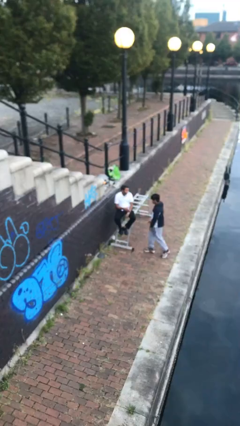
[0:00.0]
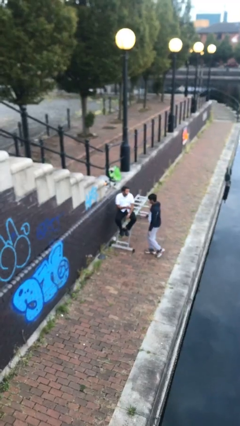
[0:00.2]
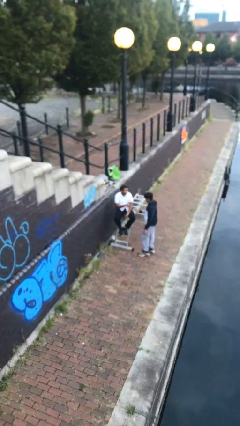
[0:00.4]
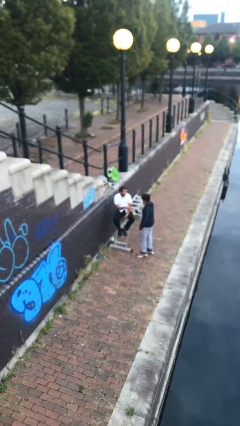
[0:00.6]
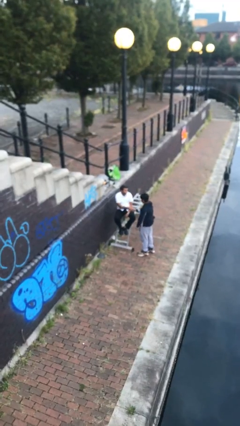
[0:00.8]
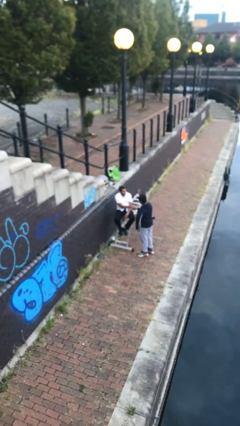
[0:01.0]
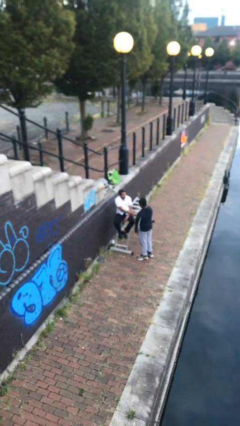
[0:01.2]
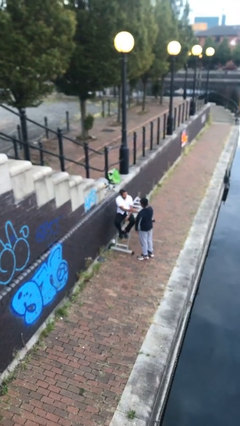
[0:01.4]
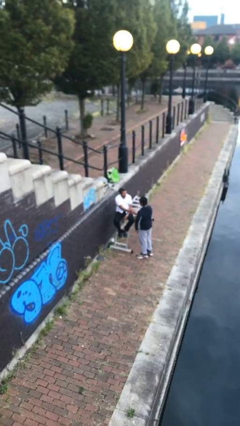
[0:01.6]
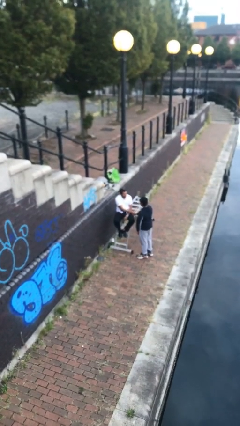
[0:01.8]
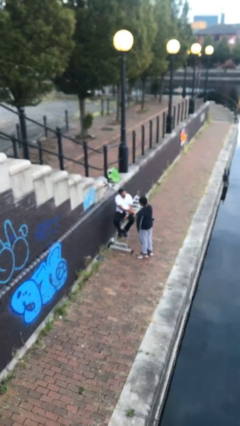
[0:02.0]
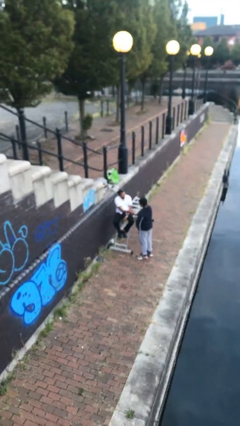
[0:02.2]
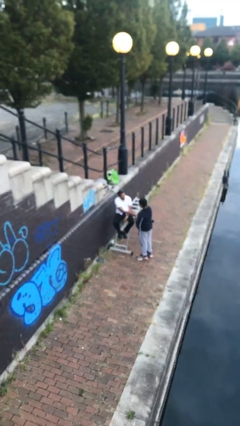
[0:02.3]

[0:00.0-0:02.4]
person shakes hand

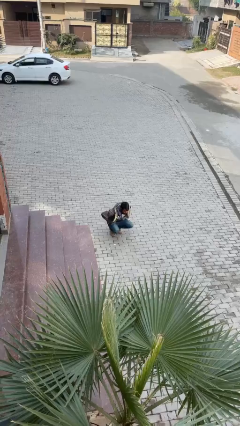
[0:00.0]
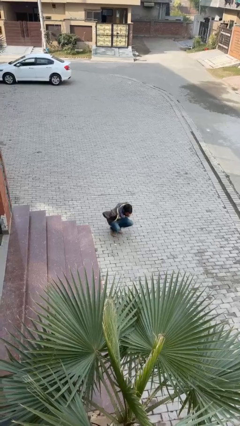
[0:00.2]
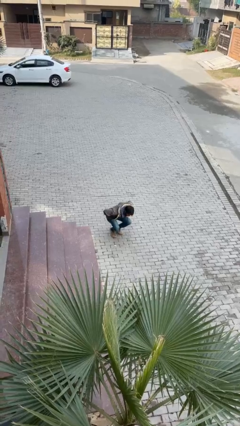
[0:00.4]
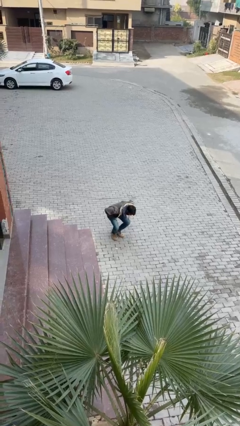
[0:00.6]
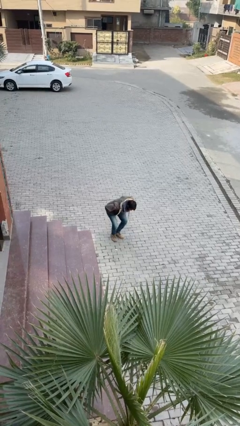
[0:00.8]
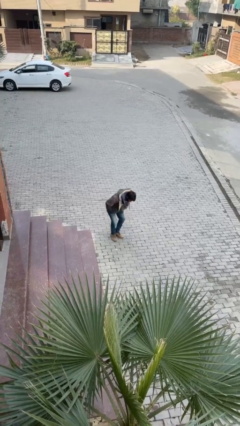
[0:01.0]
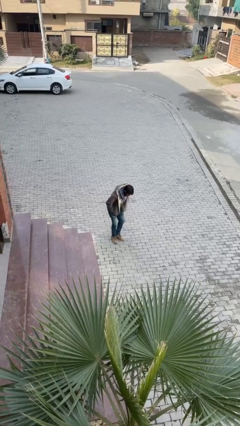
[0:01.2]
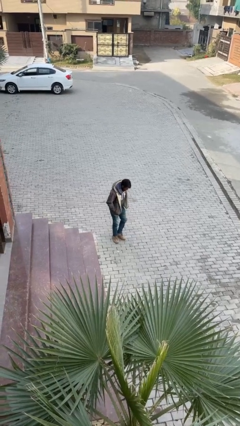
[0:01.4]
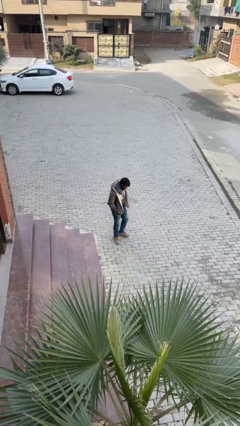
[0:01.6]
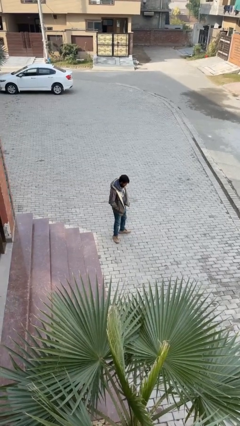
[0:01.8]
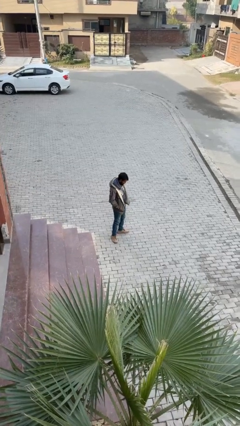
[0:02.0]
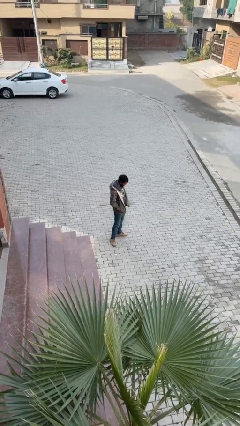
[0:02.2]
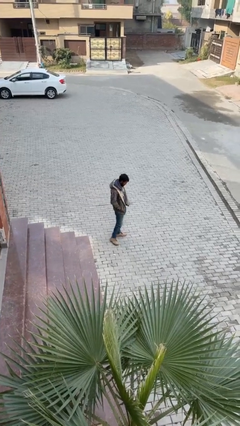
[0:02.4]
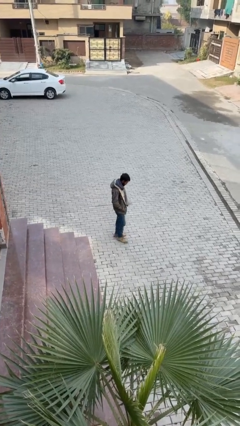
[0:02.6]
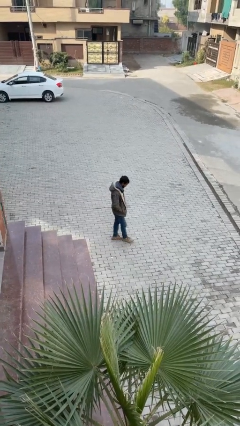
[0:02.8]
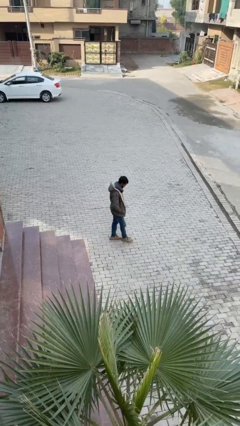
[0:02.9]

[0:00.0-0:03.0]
person stands up

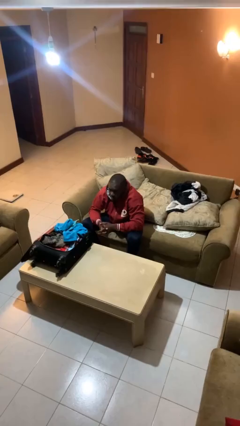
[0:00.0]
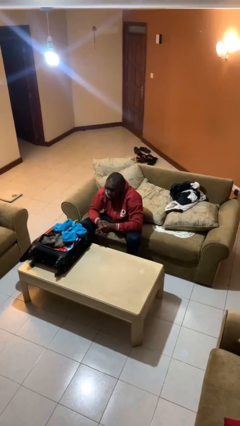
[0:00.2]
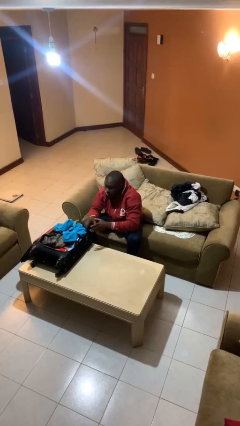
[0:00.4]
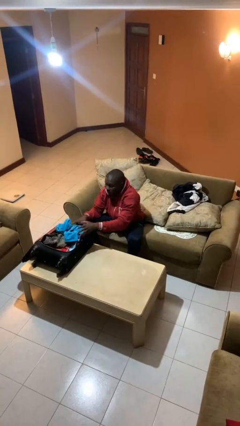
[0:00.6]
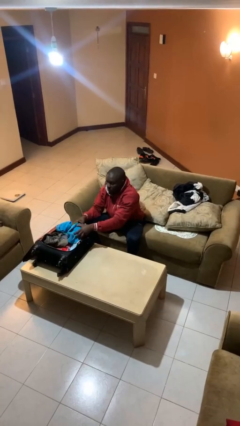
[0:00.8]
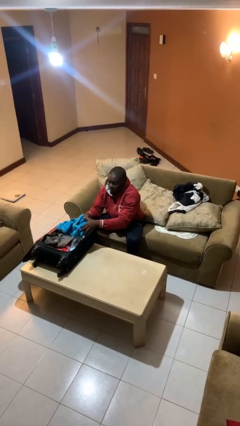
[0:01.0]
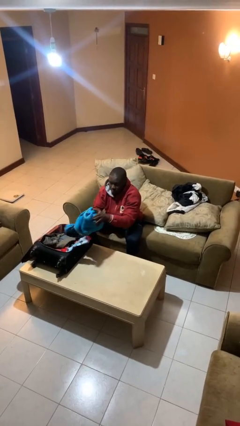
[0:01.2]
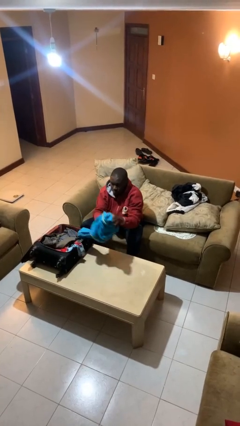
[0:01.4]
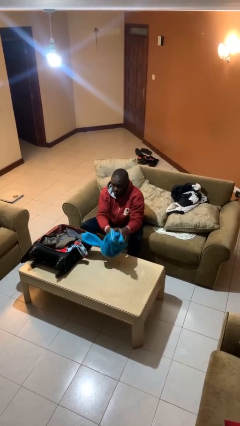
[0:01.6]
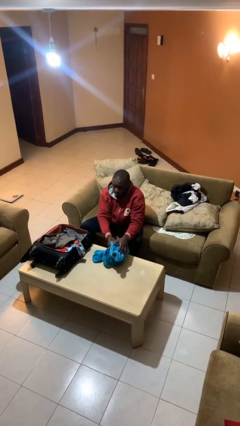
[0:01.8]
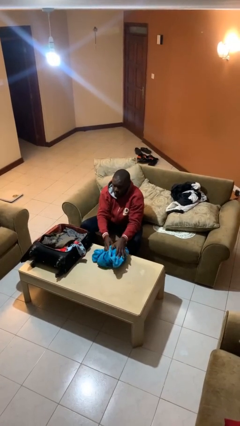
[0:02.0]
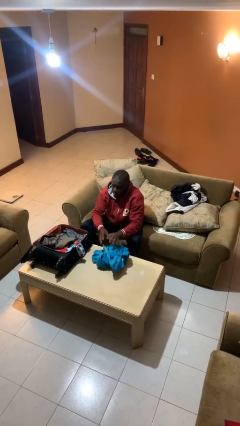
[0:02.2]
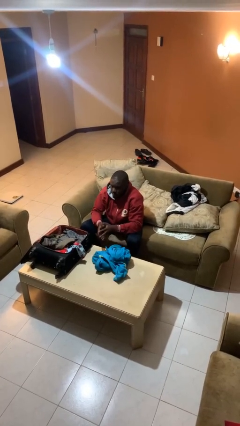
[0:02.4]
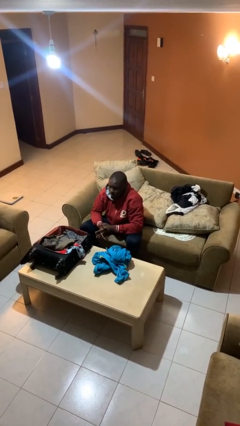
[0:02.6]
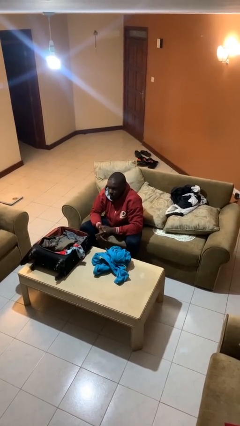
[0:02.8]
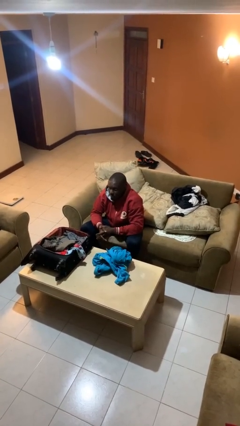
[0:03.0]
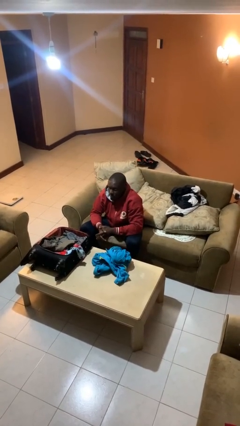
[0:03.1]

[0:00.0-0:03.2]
person unloads clothes from suitcase

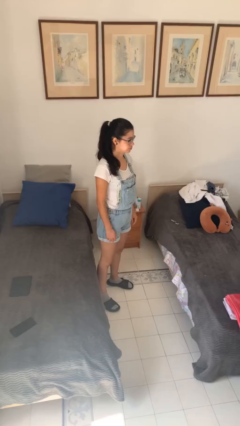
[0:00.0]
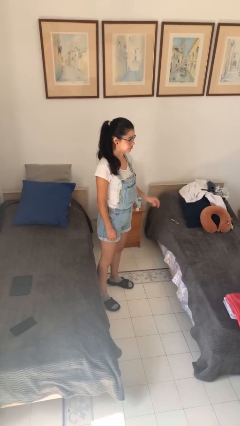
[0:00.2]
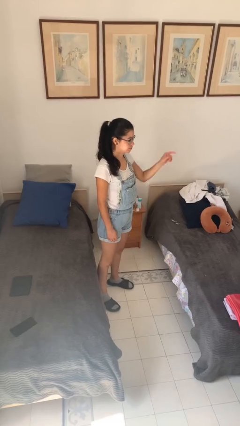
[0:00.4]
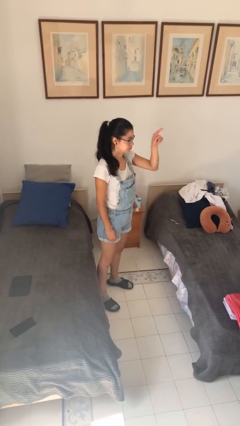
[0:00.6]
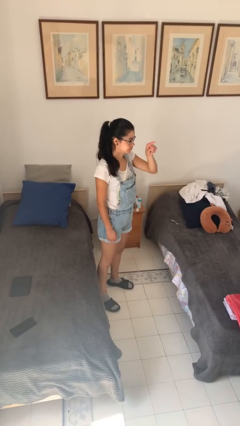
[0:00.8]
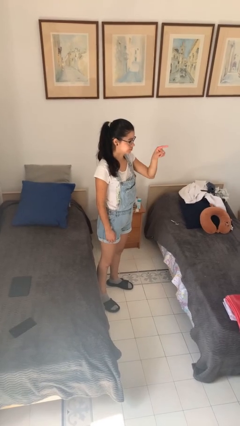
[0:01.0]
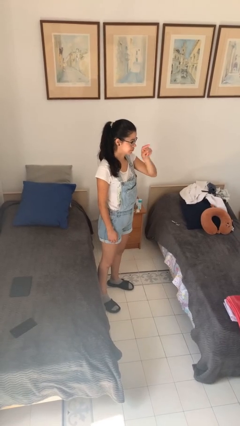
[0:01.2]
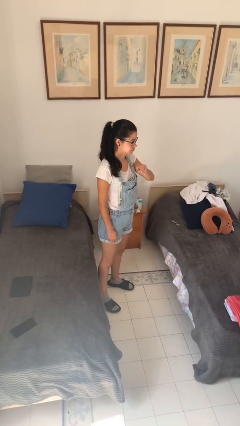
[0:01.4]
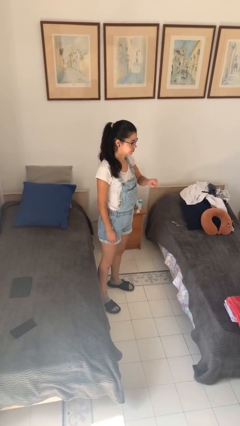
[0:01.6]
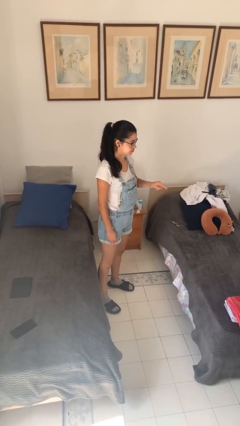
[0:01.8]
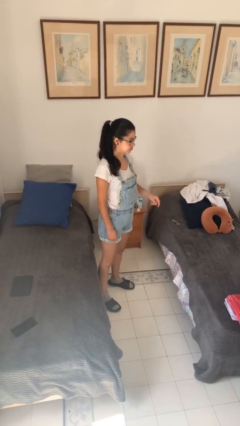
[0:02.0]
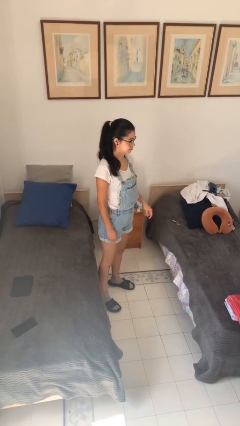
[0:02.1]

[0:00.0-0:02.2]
person gestures number three

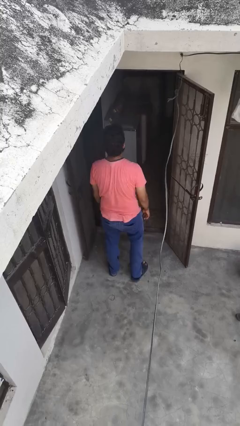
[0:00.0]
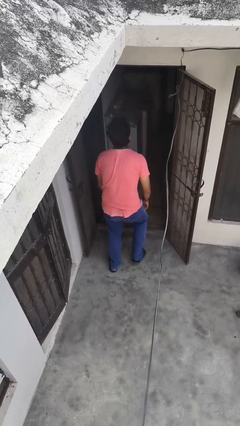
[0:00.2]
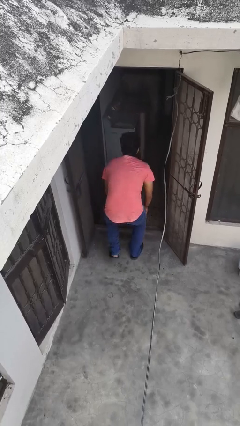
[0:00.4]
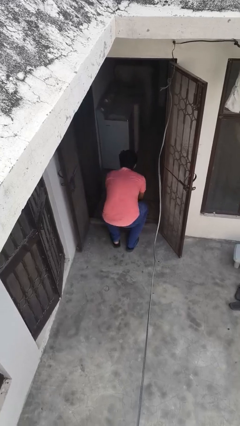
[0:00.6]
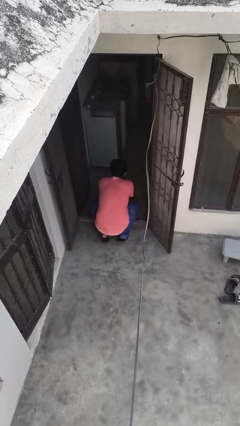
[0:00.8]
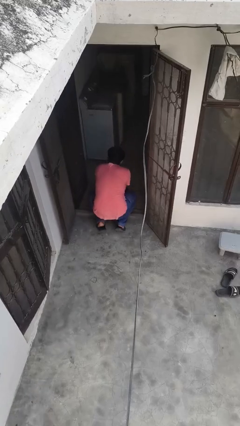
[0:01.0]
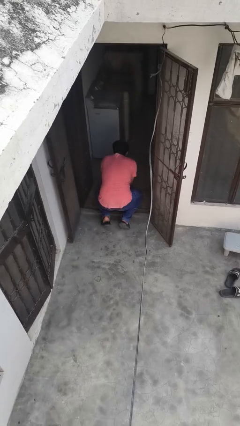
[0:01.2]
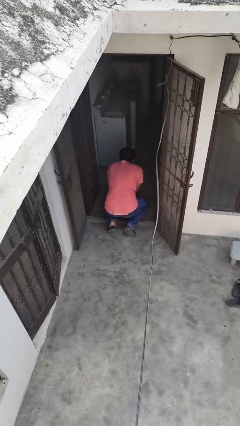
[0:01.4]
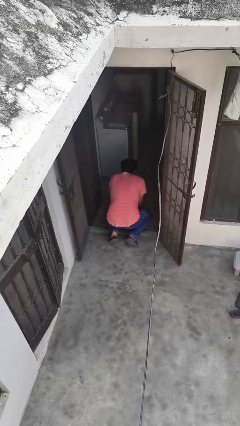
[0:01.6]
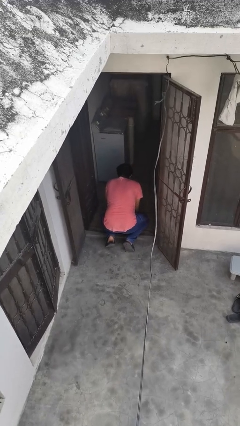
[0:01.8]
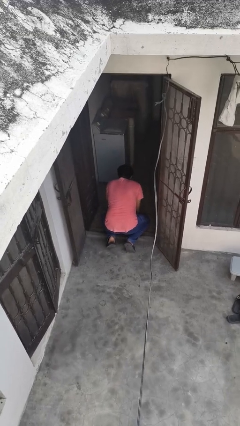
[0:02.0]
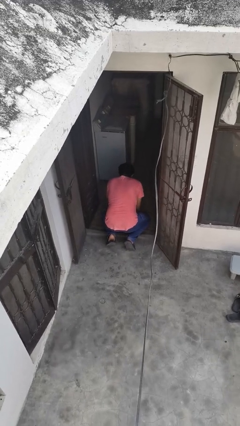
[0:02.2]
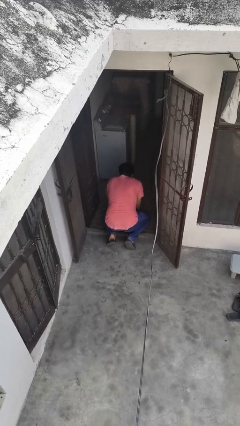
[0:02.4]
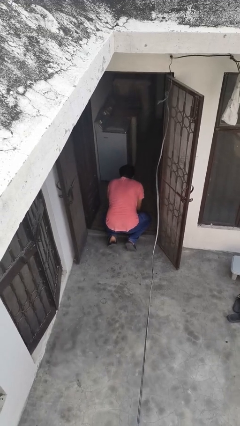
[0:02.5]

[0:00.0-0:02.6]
person trips on object on floor

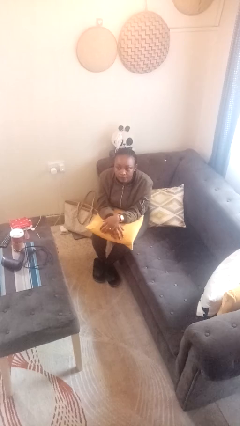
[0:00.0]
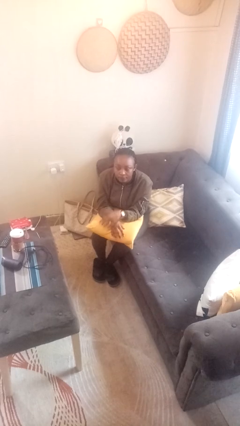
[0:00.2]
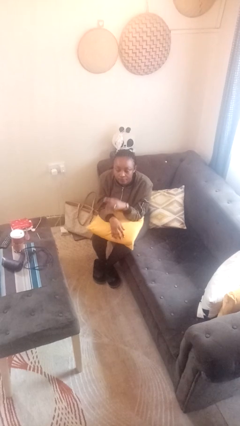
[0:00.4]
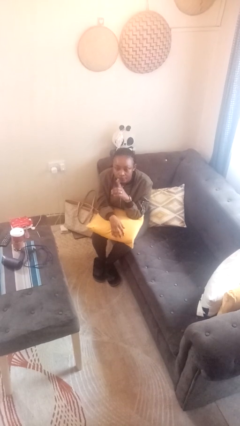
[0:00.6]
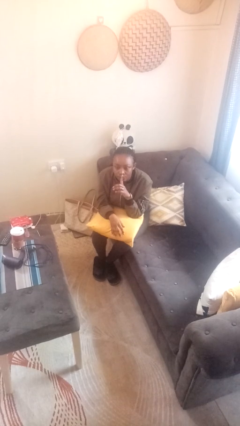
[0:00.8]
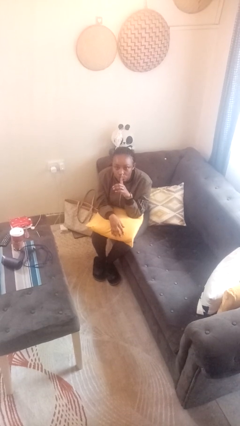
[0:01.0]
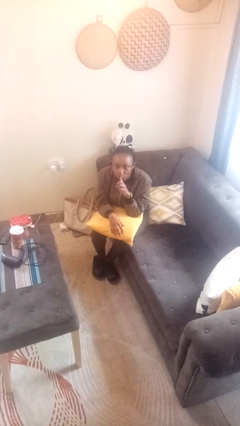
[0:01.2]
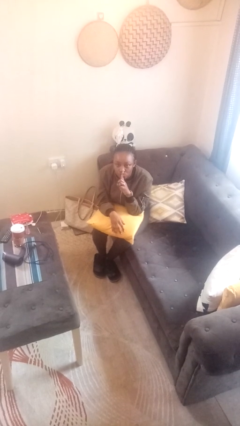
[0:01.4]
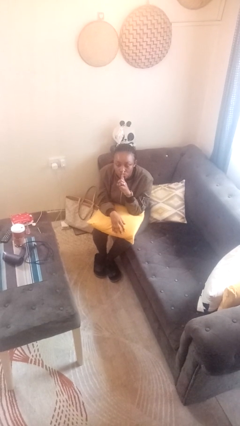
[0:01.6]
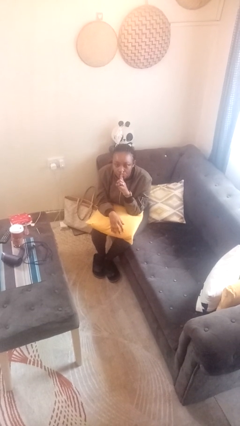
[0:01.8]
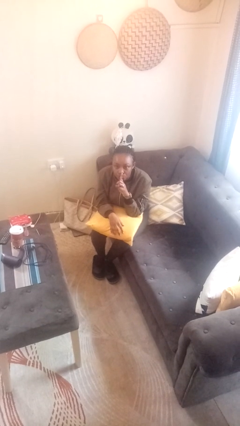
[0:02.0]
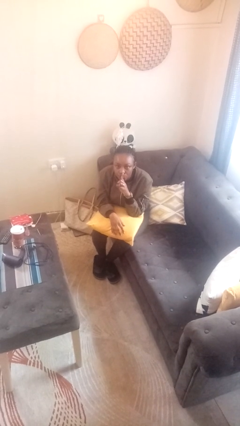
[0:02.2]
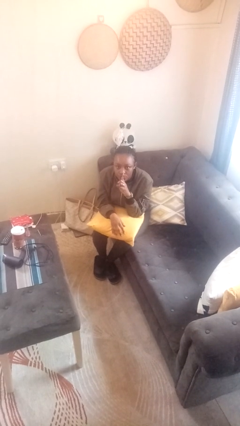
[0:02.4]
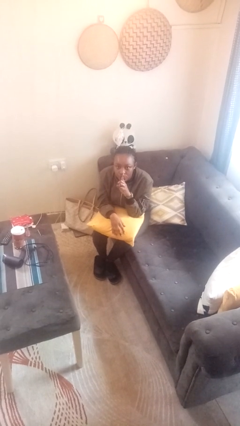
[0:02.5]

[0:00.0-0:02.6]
person gestures be quiet

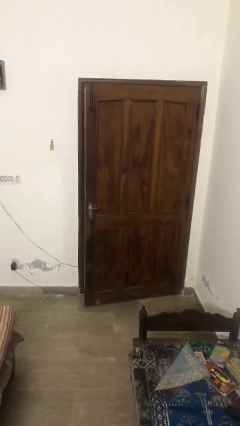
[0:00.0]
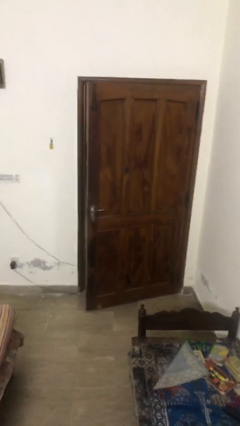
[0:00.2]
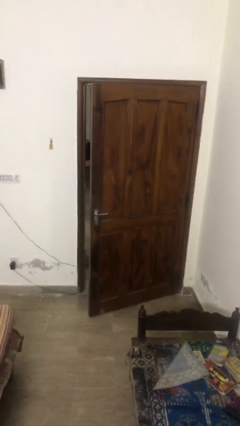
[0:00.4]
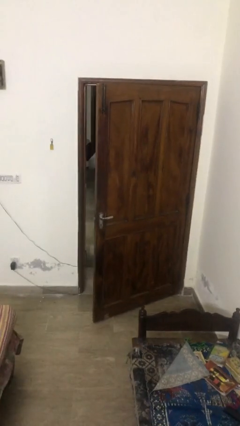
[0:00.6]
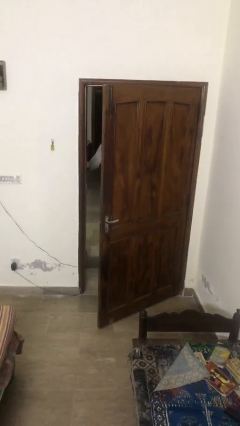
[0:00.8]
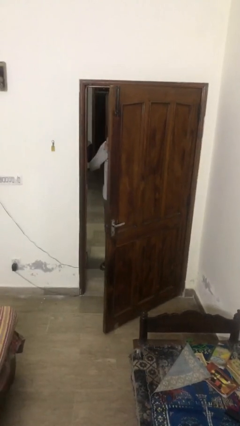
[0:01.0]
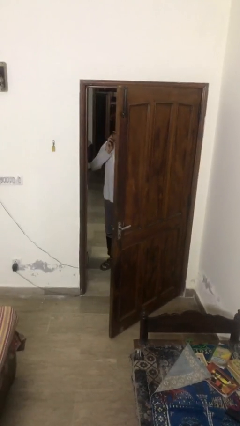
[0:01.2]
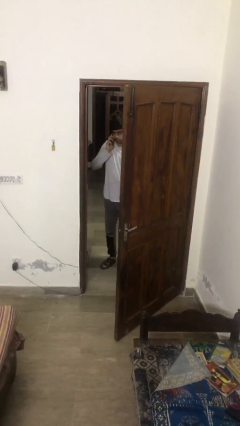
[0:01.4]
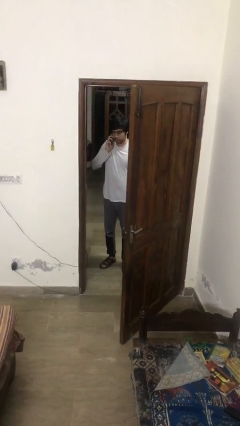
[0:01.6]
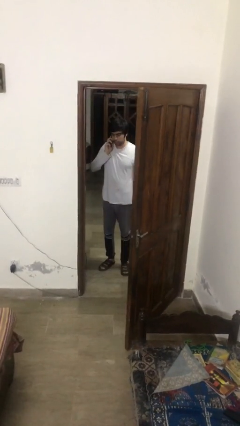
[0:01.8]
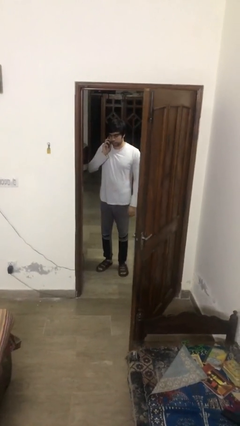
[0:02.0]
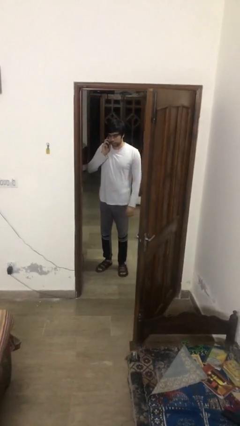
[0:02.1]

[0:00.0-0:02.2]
person opens facility door
